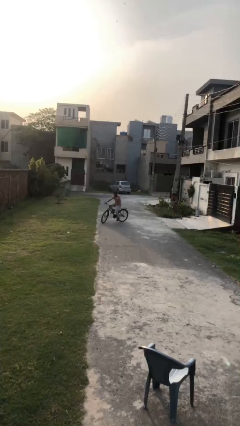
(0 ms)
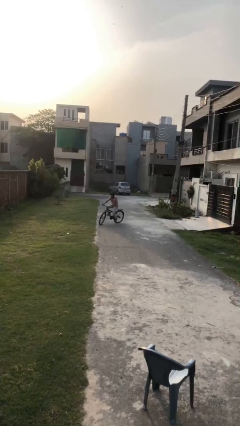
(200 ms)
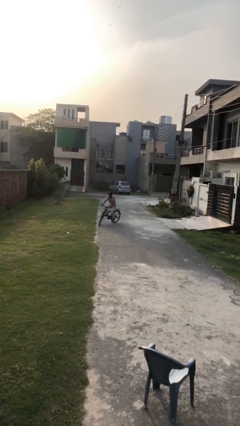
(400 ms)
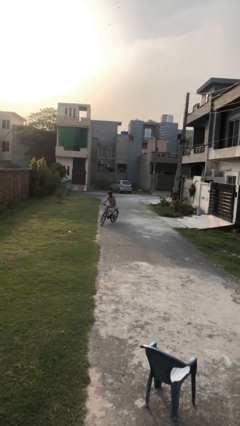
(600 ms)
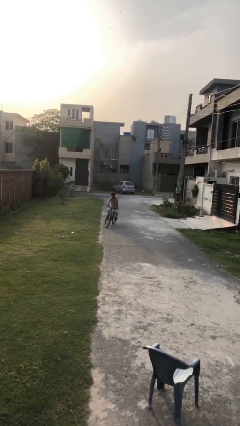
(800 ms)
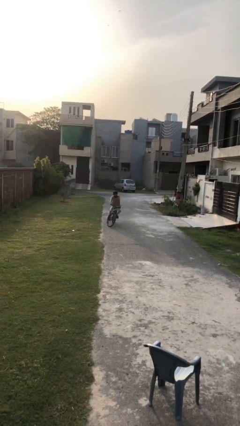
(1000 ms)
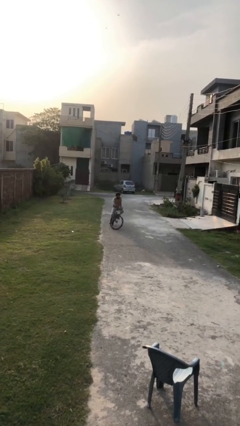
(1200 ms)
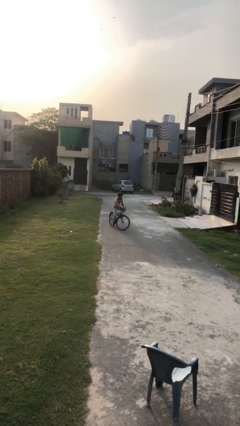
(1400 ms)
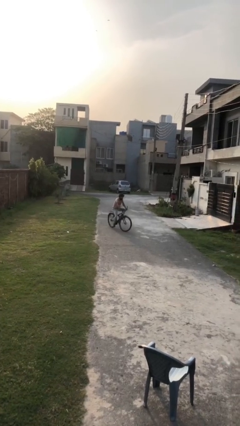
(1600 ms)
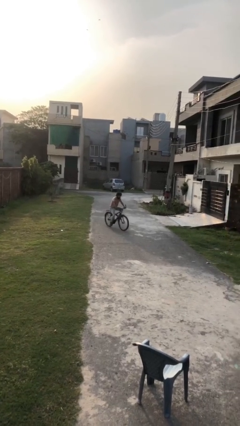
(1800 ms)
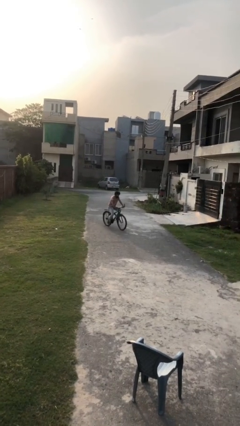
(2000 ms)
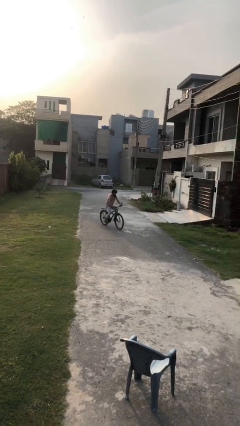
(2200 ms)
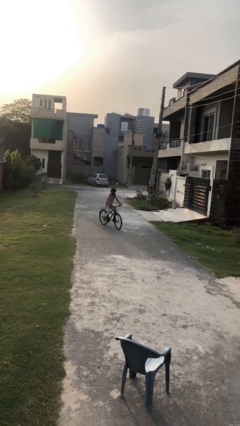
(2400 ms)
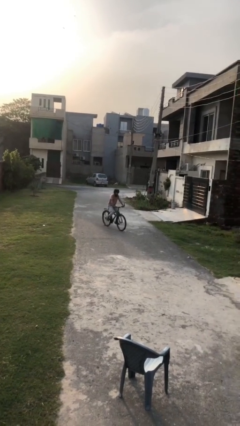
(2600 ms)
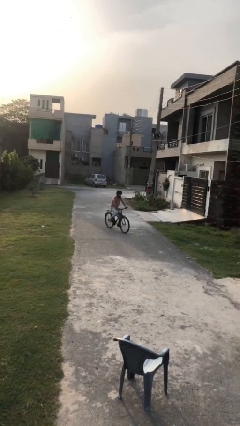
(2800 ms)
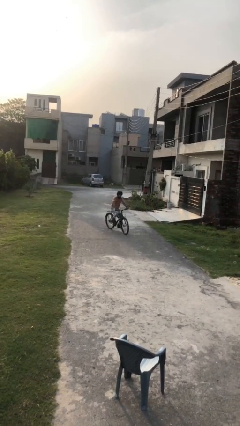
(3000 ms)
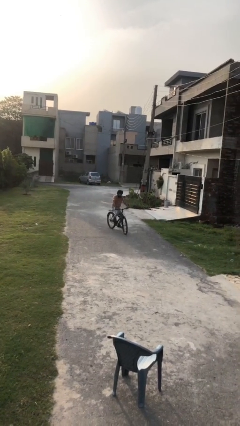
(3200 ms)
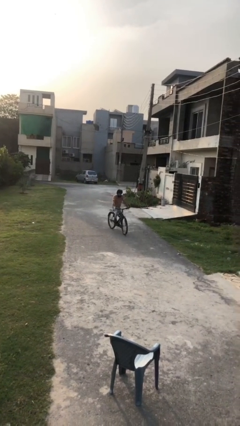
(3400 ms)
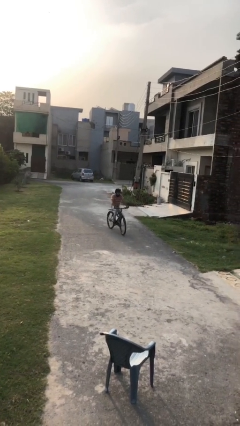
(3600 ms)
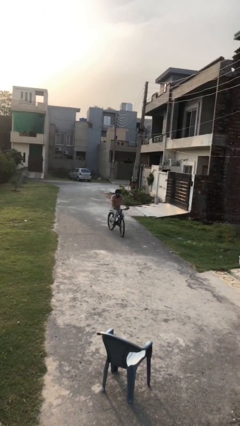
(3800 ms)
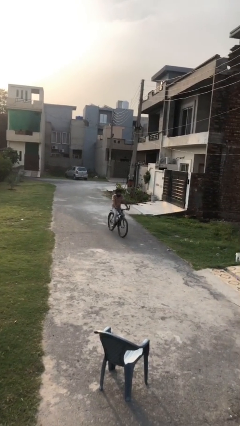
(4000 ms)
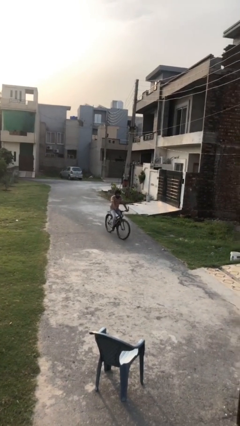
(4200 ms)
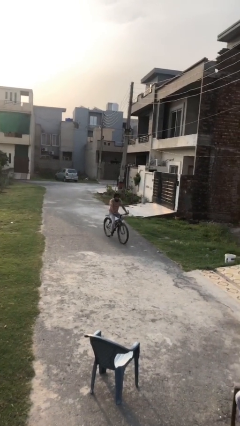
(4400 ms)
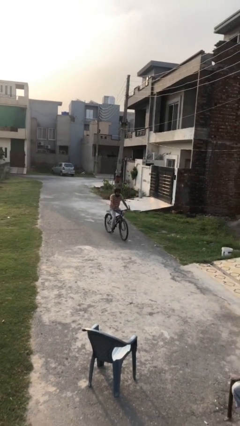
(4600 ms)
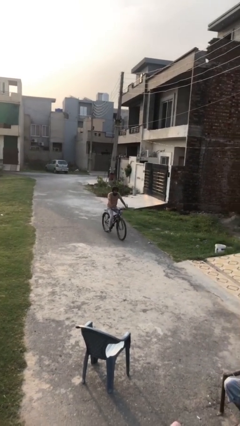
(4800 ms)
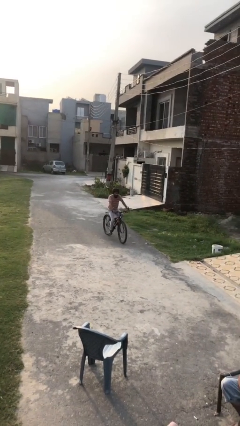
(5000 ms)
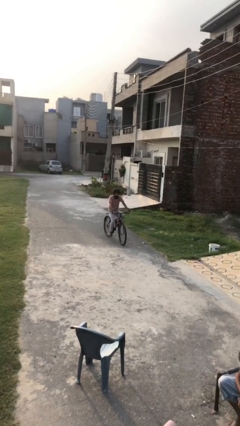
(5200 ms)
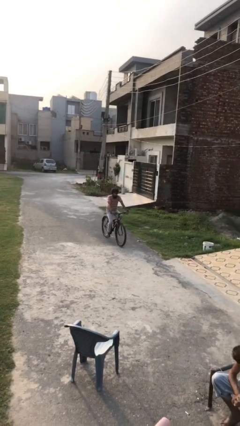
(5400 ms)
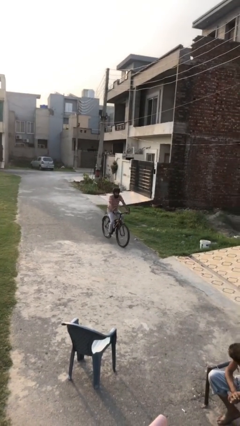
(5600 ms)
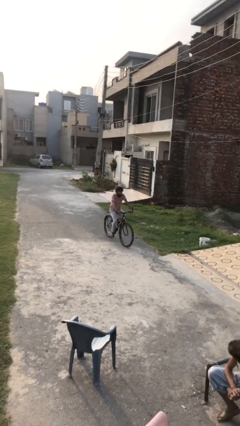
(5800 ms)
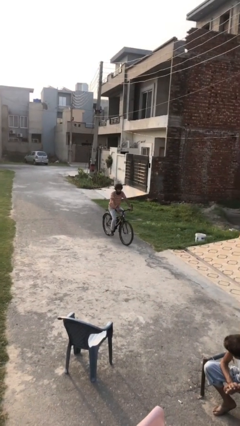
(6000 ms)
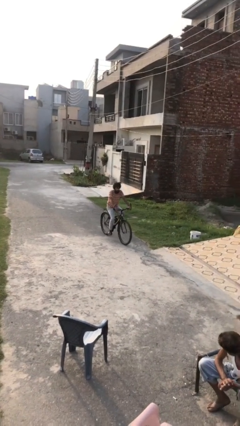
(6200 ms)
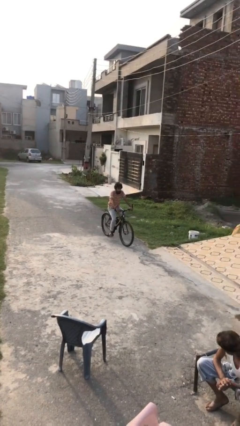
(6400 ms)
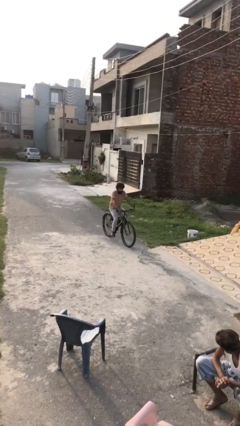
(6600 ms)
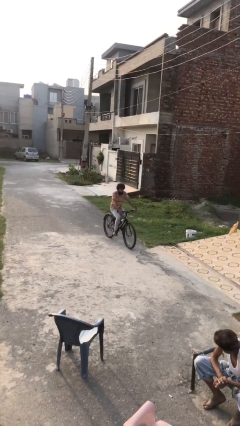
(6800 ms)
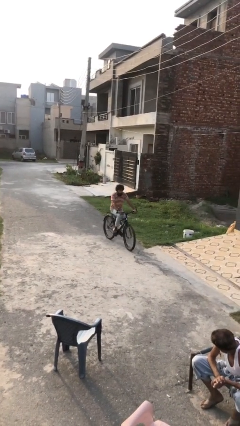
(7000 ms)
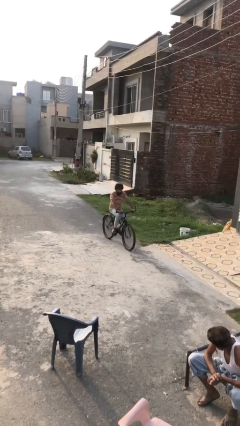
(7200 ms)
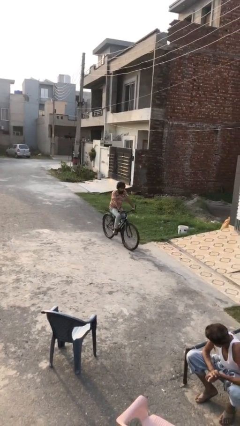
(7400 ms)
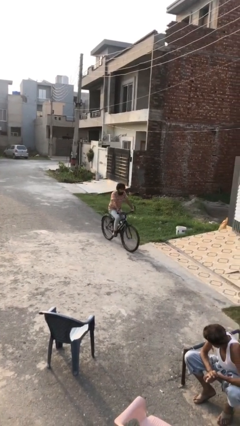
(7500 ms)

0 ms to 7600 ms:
person rides bicycle

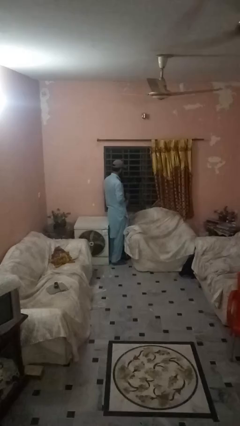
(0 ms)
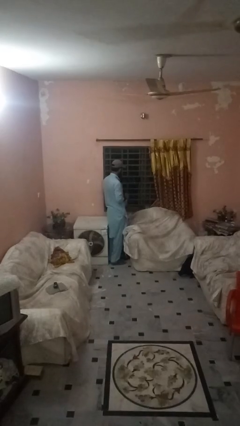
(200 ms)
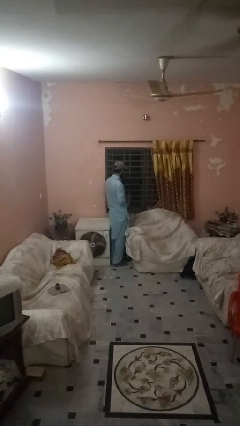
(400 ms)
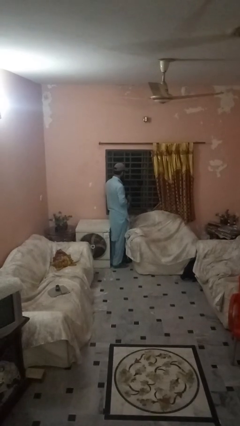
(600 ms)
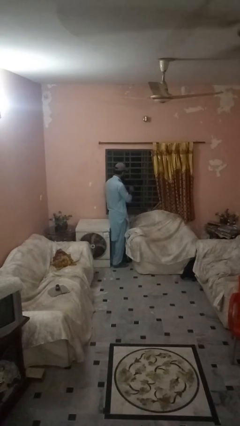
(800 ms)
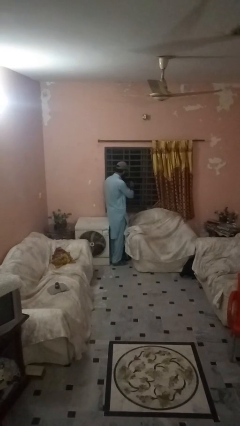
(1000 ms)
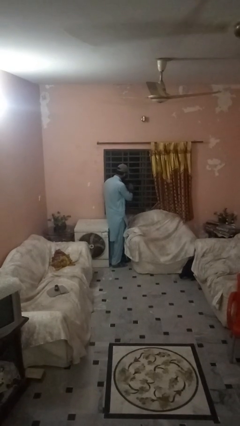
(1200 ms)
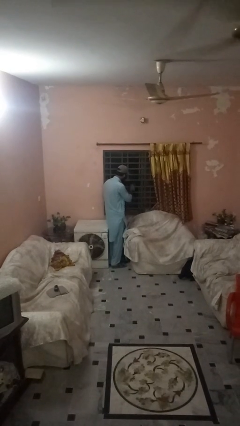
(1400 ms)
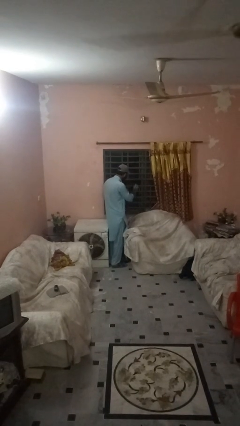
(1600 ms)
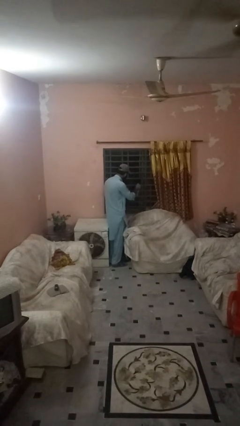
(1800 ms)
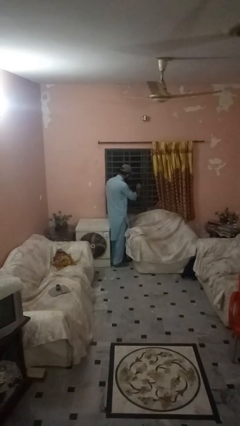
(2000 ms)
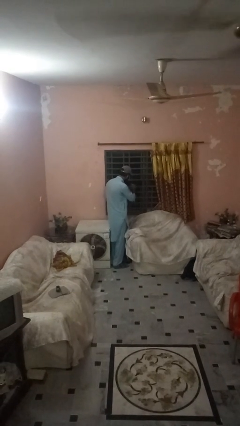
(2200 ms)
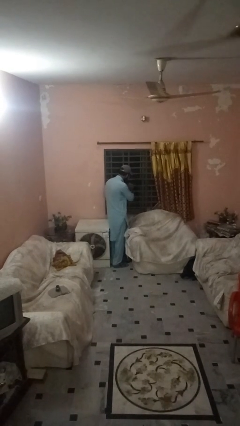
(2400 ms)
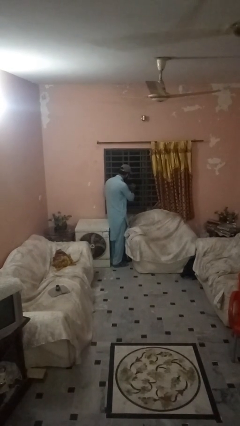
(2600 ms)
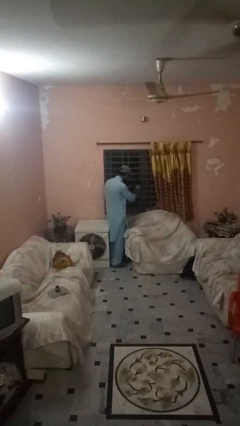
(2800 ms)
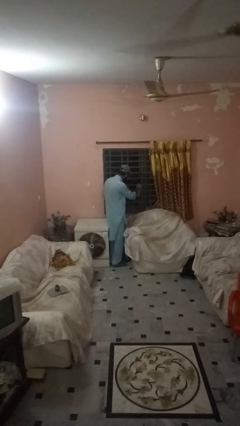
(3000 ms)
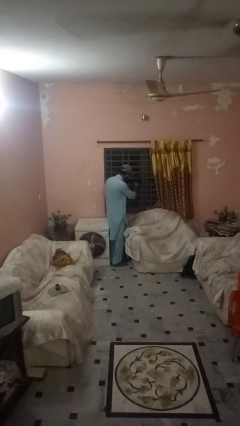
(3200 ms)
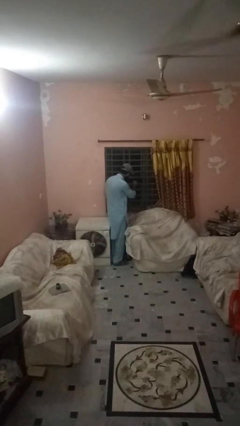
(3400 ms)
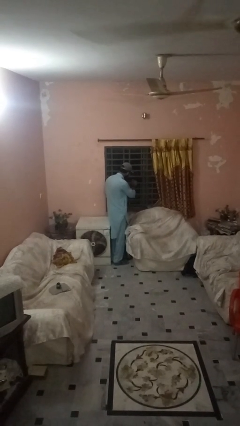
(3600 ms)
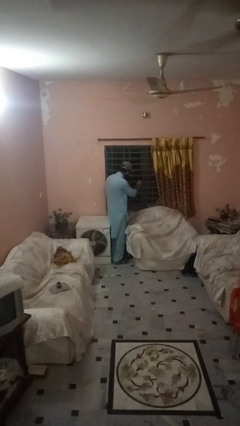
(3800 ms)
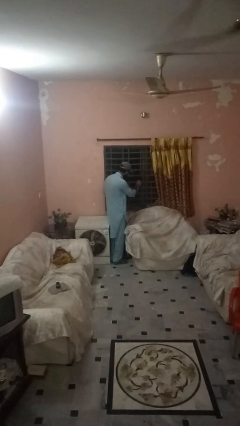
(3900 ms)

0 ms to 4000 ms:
person sprays from bottle

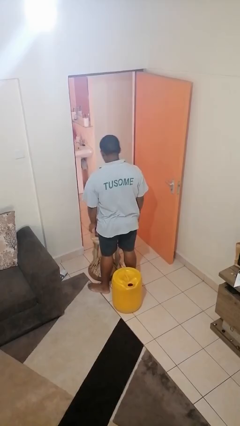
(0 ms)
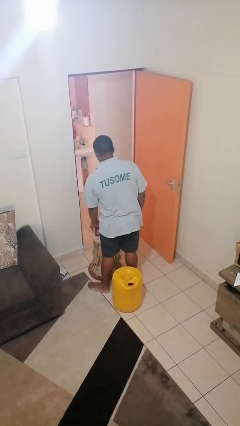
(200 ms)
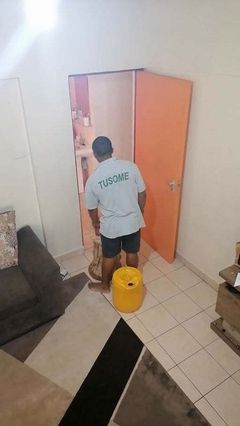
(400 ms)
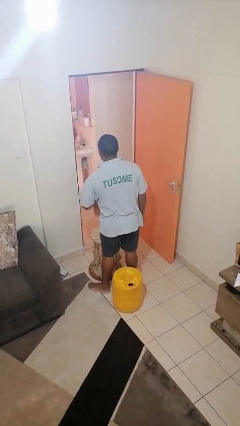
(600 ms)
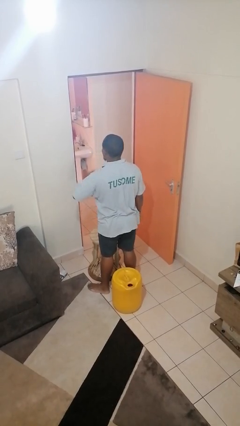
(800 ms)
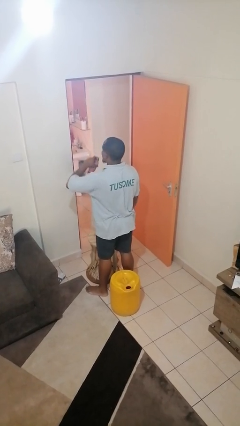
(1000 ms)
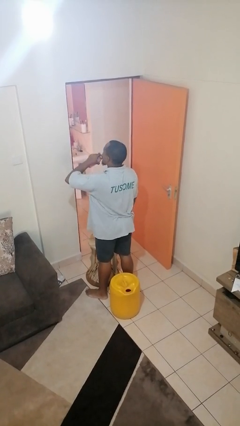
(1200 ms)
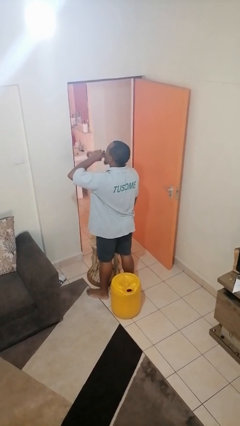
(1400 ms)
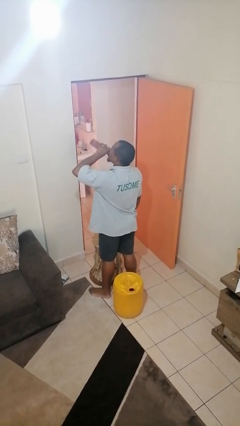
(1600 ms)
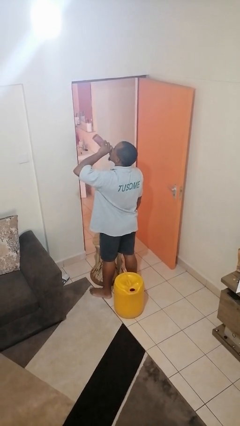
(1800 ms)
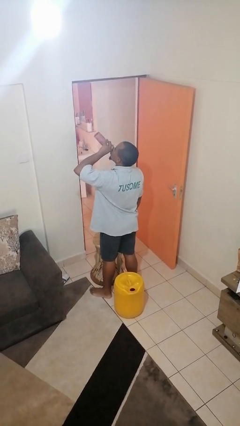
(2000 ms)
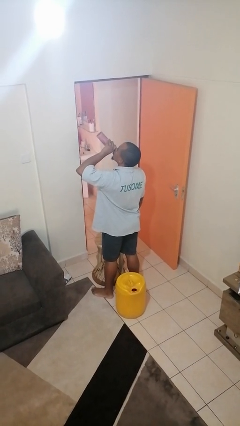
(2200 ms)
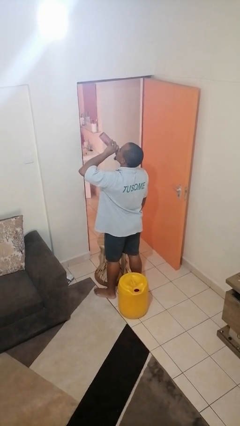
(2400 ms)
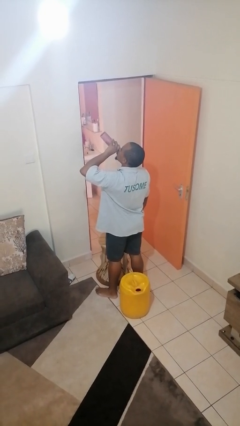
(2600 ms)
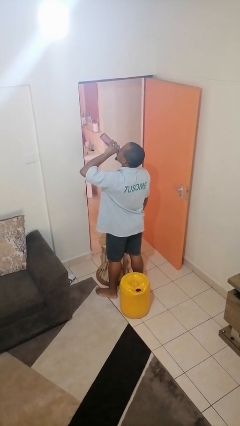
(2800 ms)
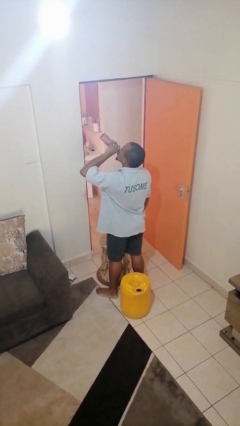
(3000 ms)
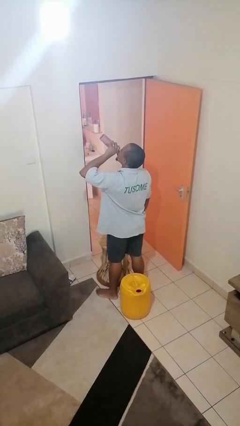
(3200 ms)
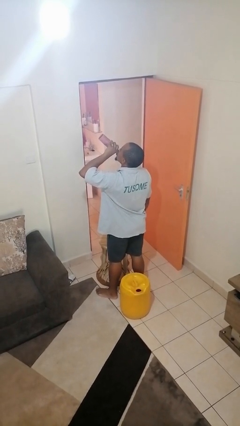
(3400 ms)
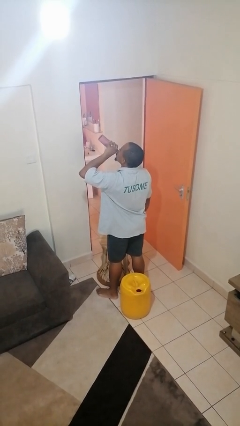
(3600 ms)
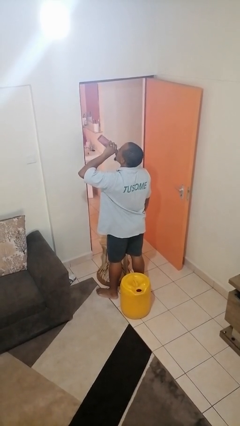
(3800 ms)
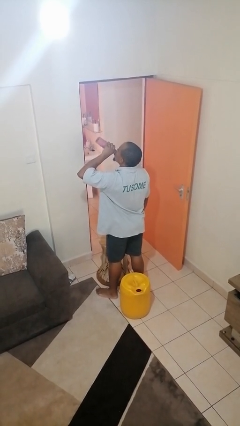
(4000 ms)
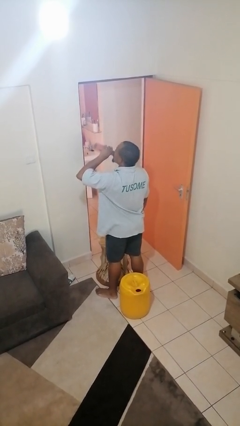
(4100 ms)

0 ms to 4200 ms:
person drinks from bottle

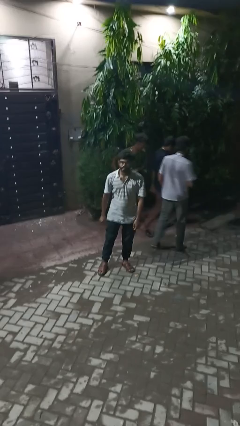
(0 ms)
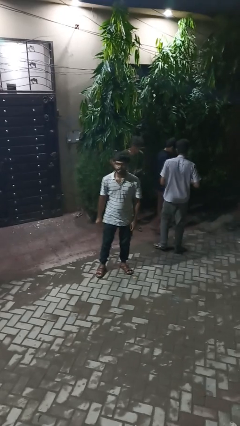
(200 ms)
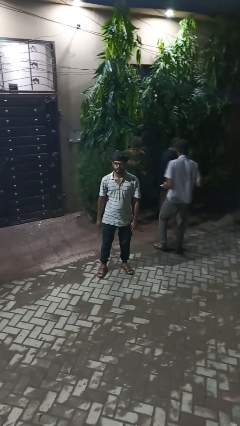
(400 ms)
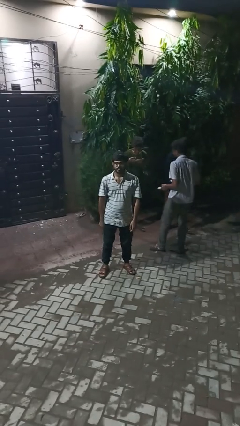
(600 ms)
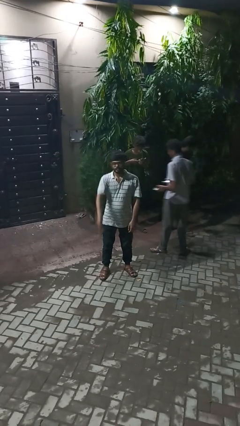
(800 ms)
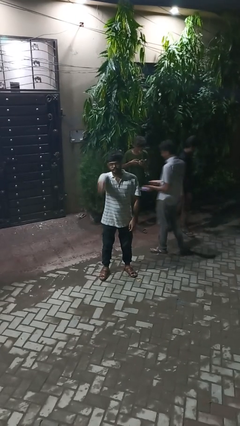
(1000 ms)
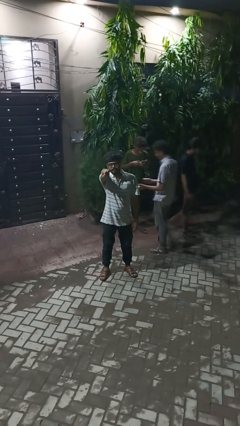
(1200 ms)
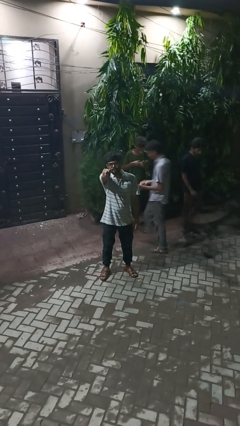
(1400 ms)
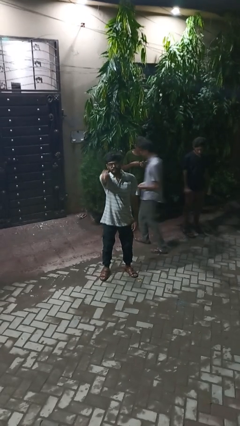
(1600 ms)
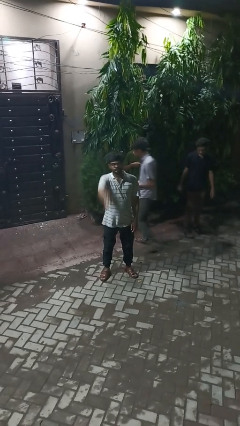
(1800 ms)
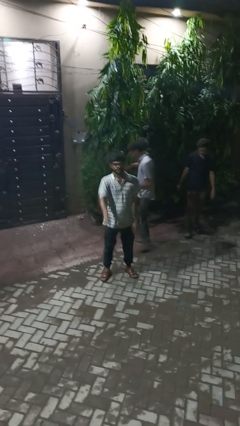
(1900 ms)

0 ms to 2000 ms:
person points at person

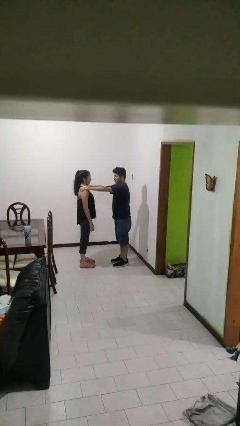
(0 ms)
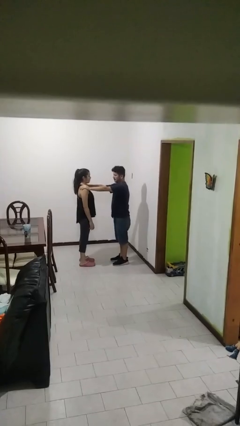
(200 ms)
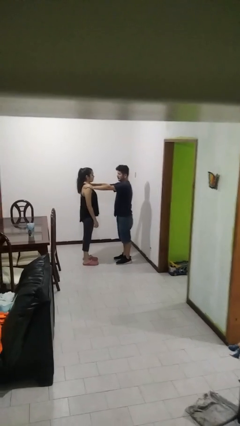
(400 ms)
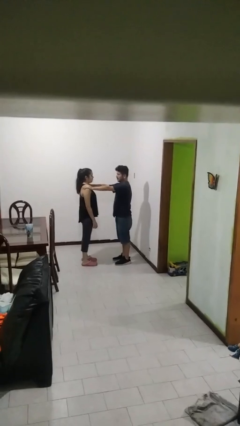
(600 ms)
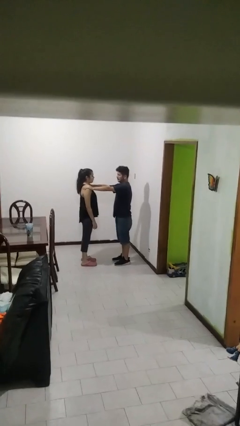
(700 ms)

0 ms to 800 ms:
person grabs person by shoulder
